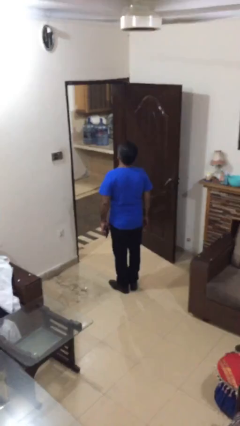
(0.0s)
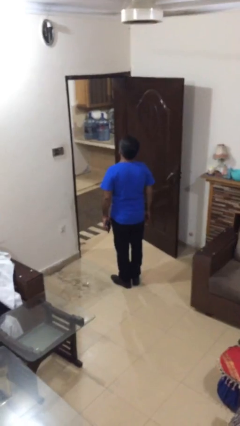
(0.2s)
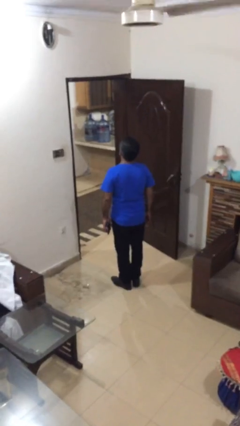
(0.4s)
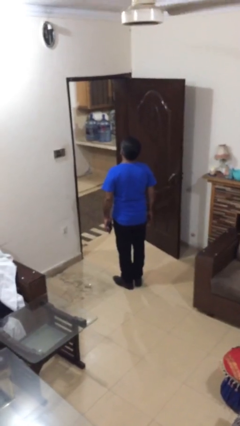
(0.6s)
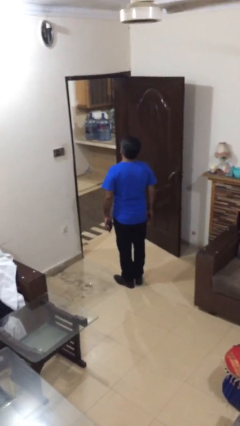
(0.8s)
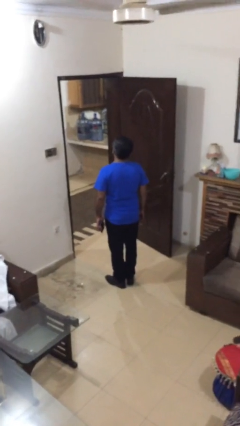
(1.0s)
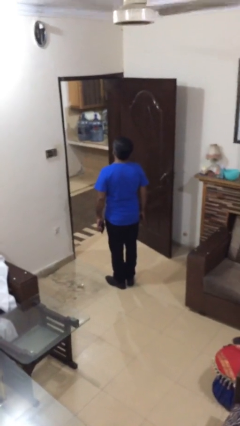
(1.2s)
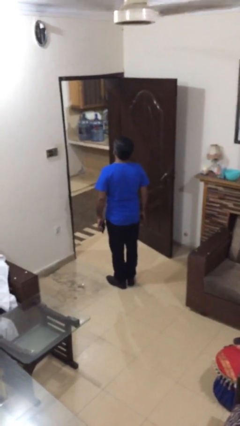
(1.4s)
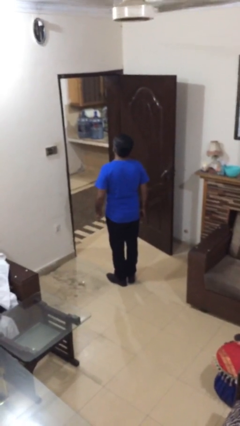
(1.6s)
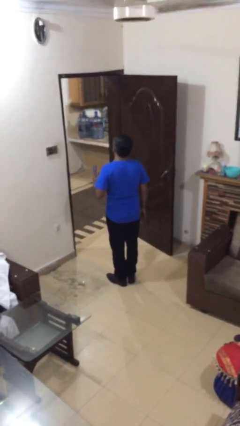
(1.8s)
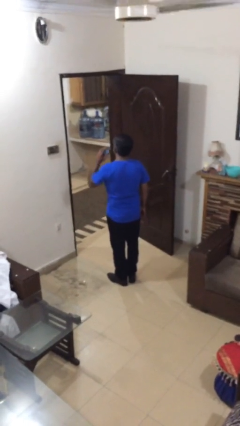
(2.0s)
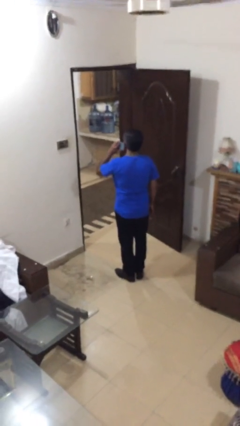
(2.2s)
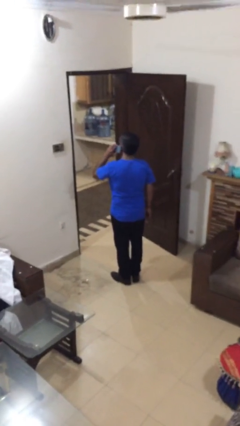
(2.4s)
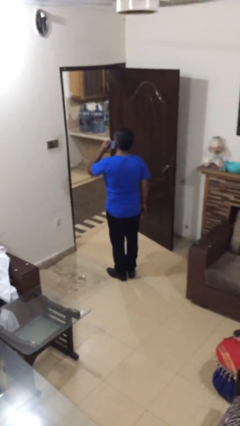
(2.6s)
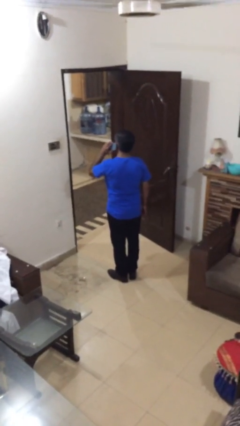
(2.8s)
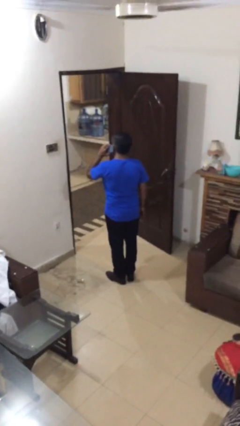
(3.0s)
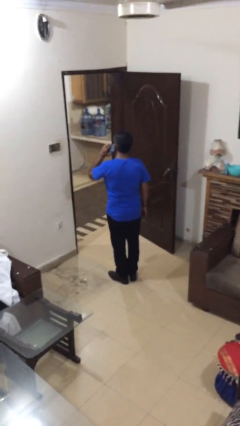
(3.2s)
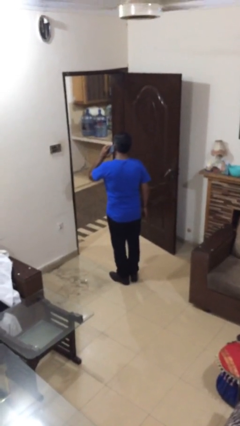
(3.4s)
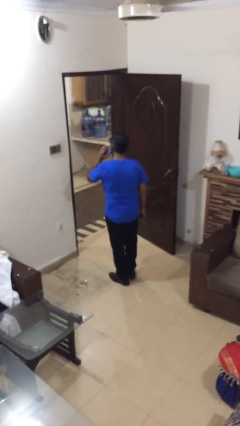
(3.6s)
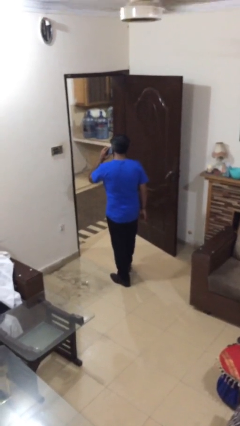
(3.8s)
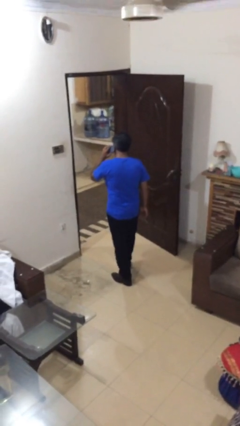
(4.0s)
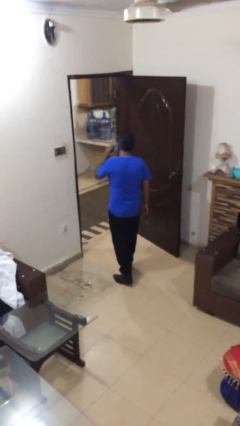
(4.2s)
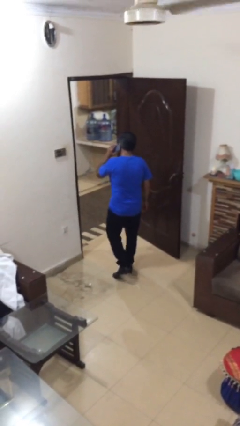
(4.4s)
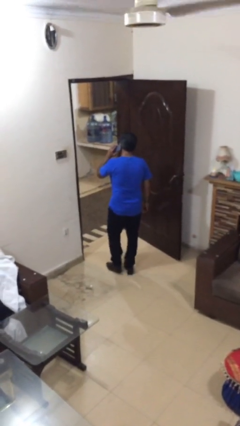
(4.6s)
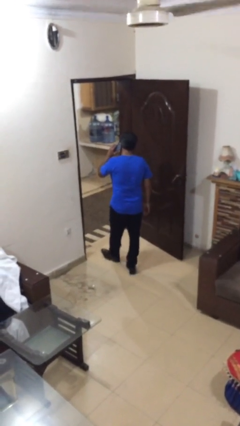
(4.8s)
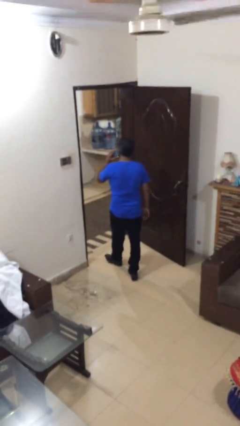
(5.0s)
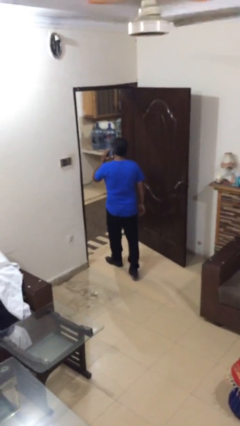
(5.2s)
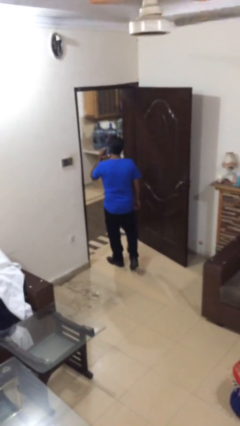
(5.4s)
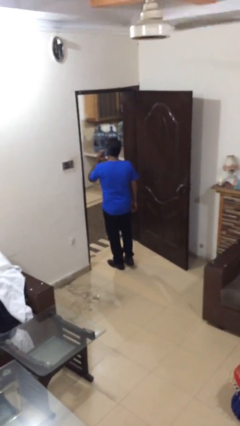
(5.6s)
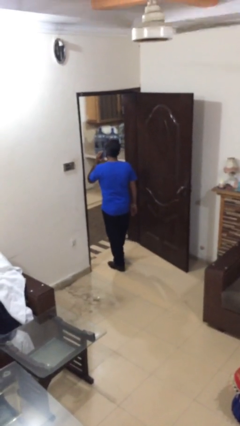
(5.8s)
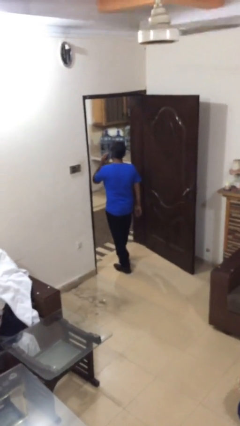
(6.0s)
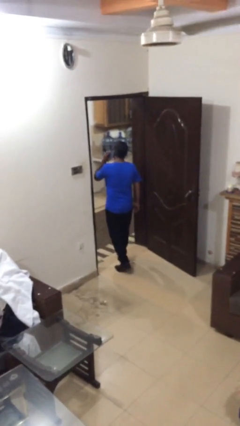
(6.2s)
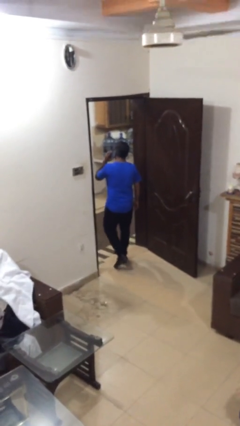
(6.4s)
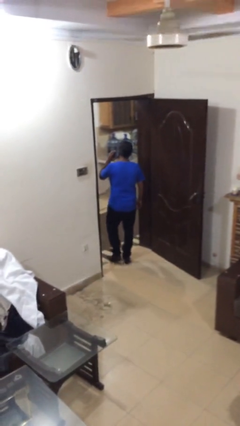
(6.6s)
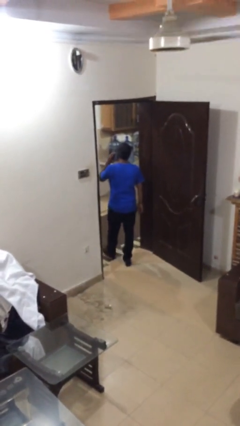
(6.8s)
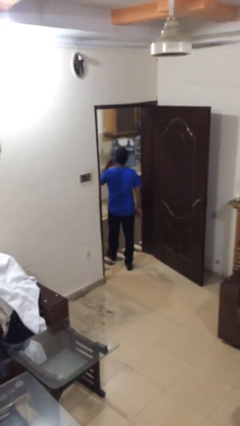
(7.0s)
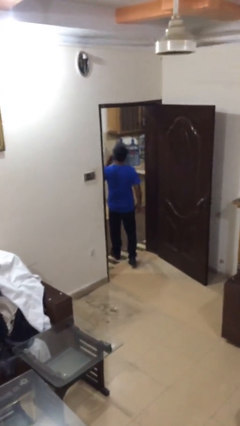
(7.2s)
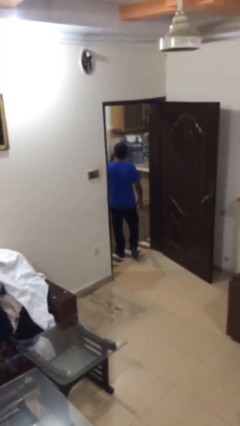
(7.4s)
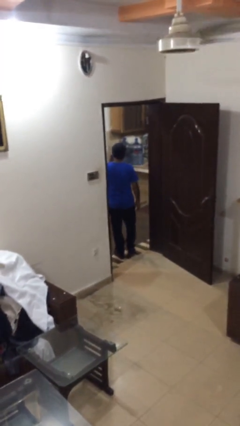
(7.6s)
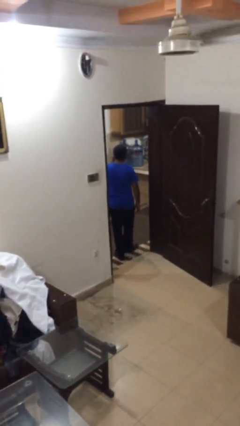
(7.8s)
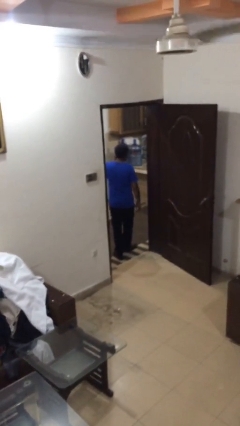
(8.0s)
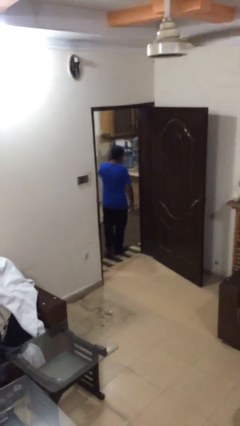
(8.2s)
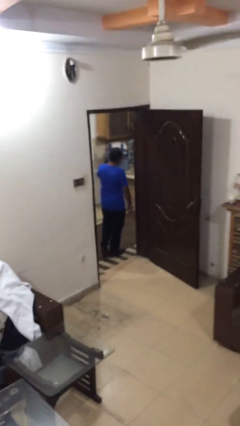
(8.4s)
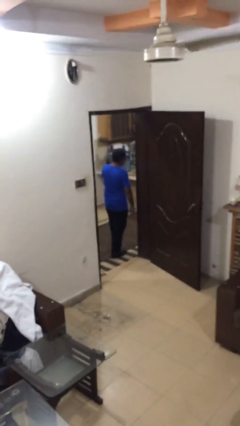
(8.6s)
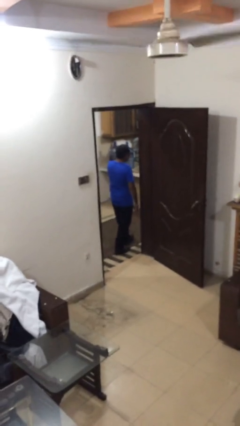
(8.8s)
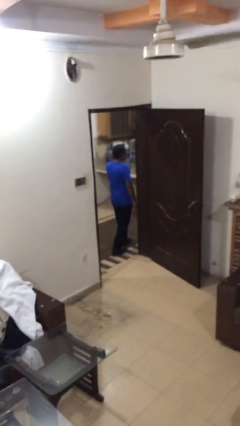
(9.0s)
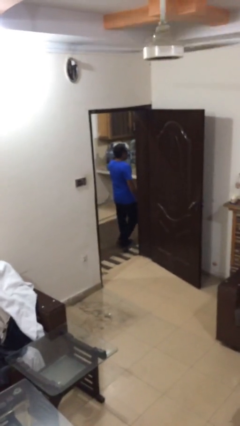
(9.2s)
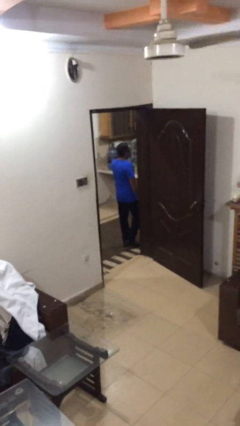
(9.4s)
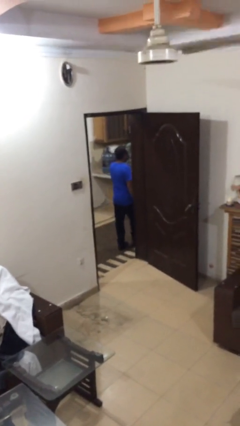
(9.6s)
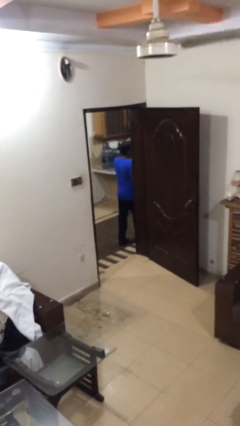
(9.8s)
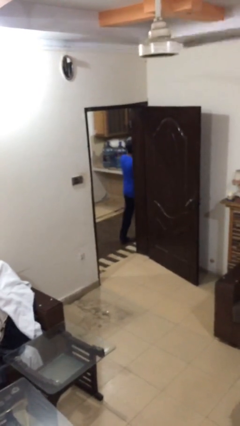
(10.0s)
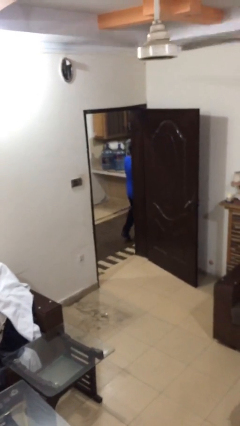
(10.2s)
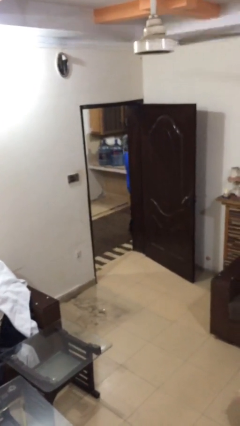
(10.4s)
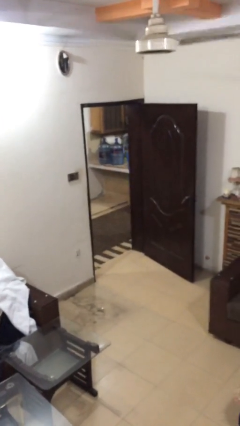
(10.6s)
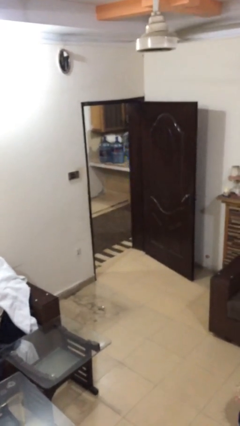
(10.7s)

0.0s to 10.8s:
person exits scene through structure

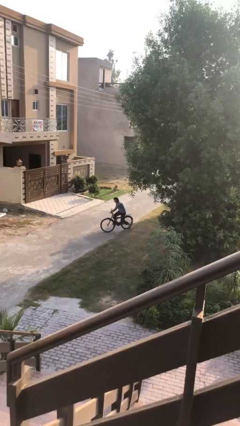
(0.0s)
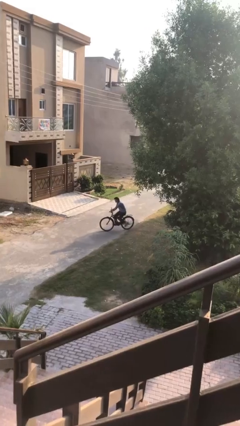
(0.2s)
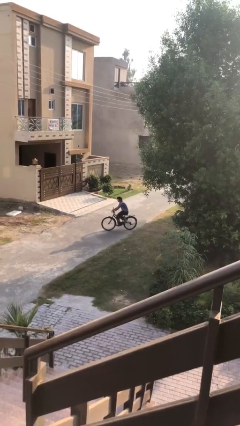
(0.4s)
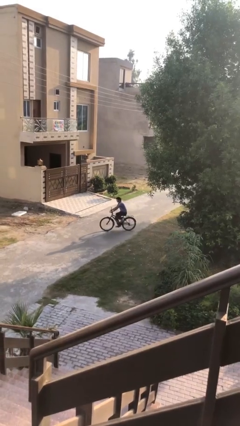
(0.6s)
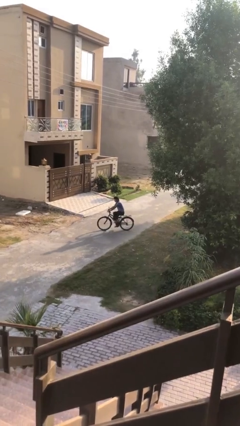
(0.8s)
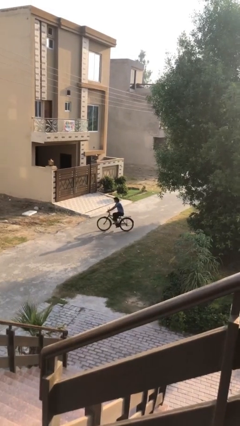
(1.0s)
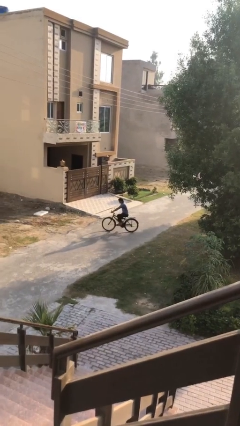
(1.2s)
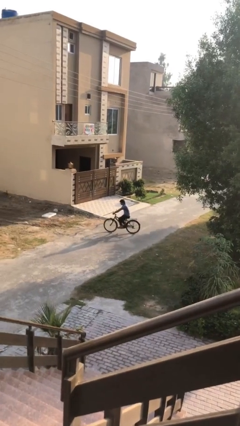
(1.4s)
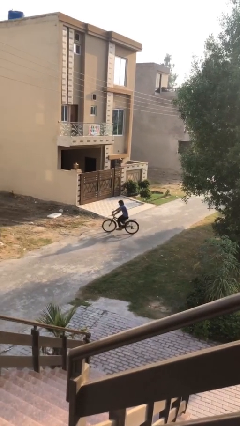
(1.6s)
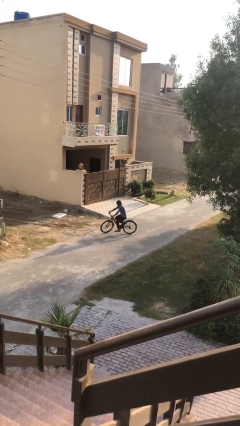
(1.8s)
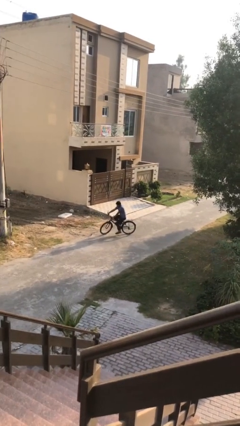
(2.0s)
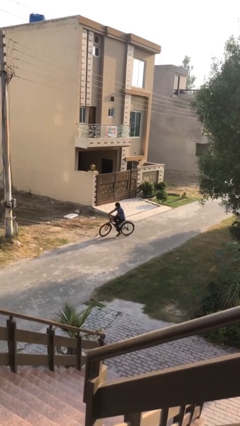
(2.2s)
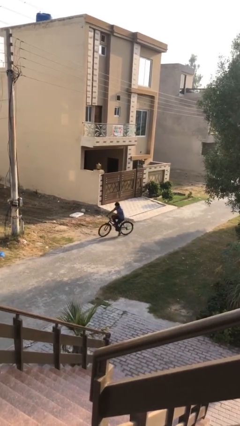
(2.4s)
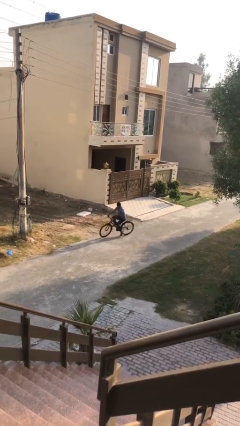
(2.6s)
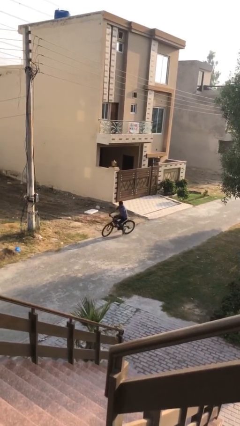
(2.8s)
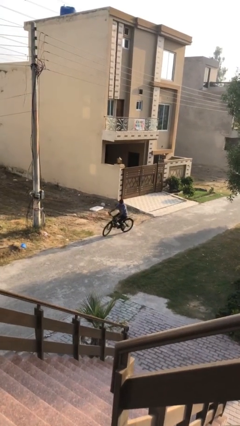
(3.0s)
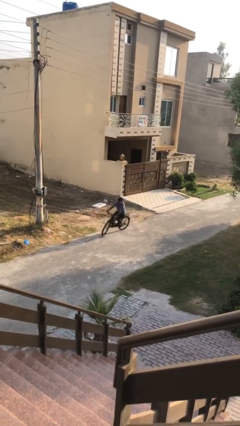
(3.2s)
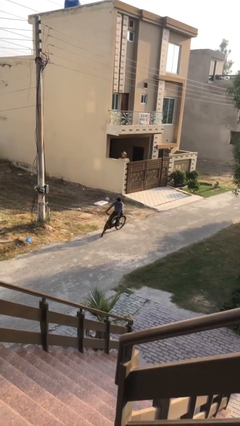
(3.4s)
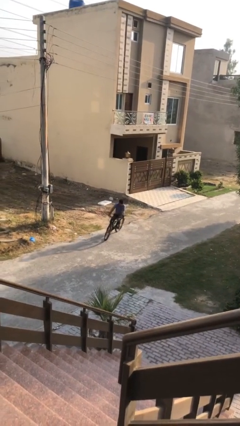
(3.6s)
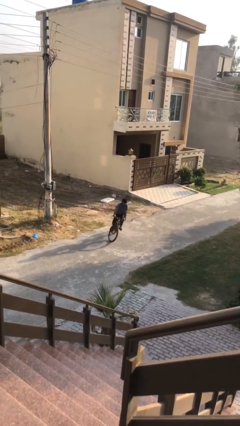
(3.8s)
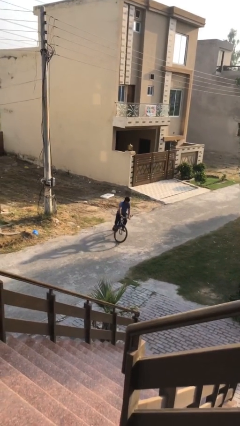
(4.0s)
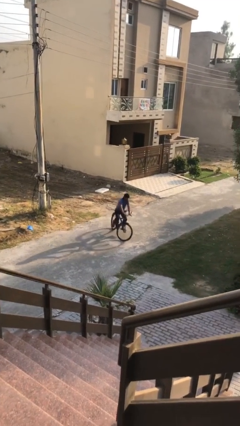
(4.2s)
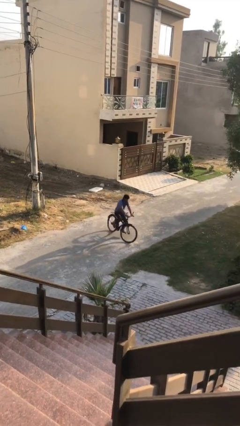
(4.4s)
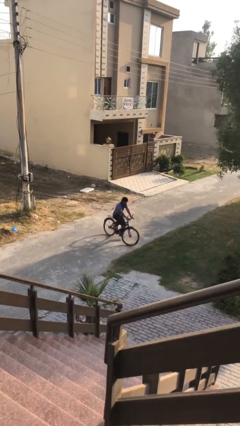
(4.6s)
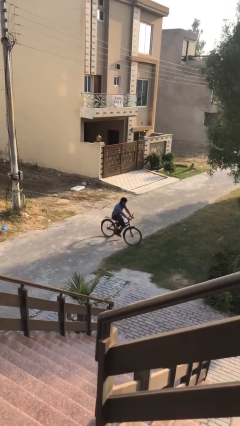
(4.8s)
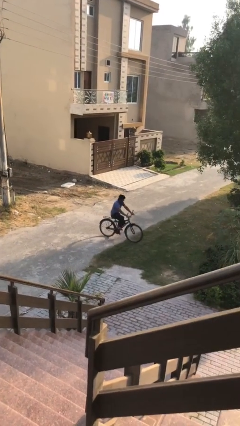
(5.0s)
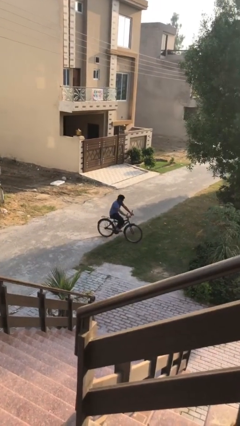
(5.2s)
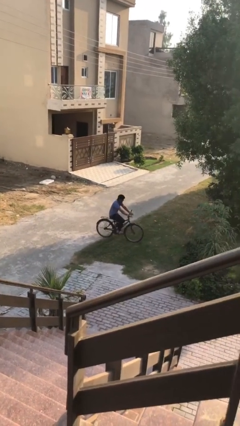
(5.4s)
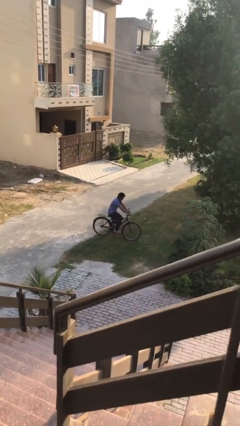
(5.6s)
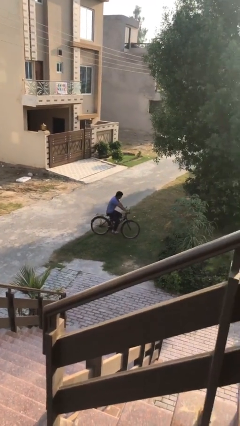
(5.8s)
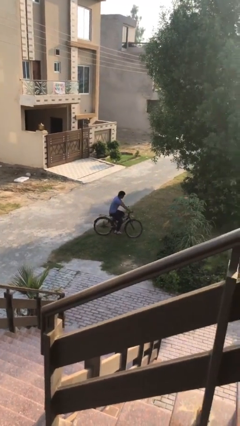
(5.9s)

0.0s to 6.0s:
person rides bicycle

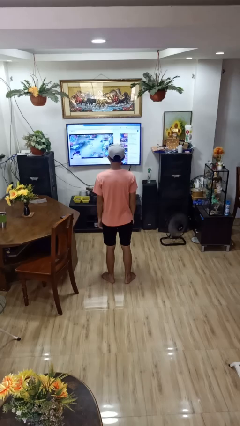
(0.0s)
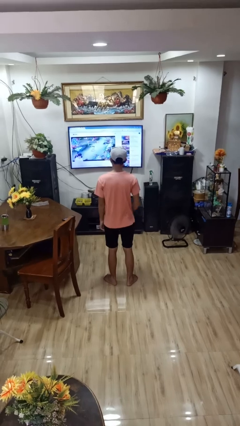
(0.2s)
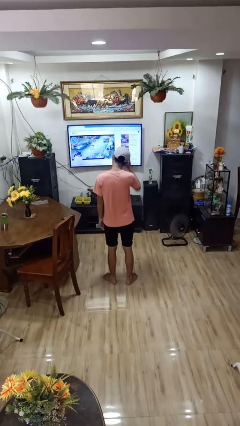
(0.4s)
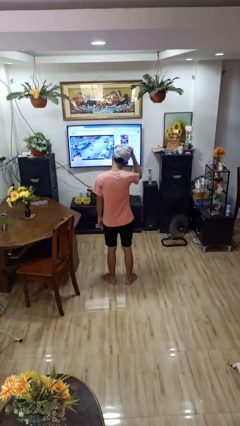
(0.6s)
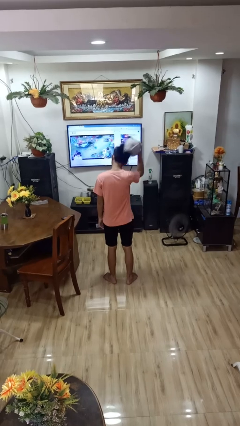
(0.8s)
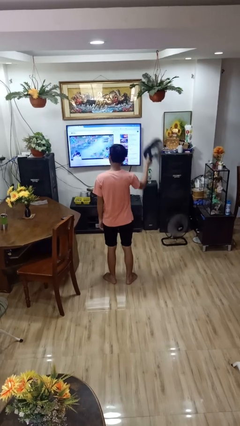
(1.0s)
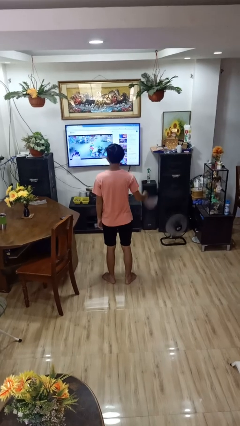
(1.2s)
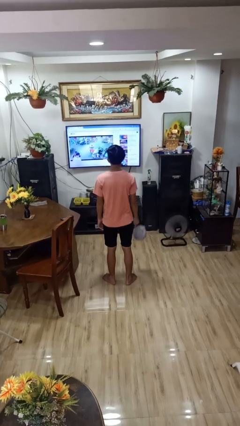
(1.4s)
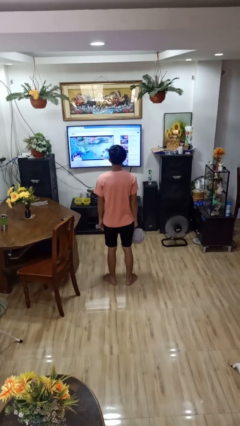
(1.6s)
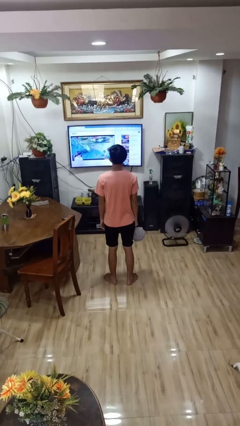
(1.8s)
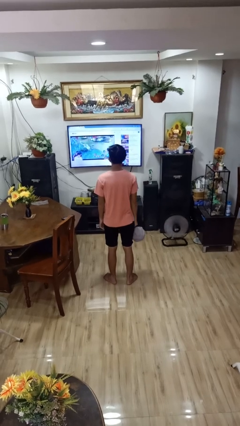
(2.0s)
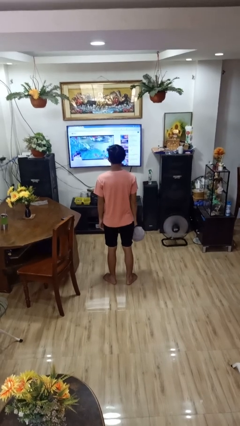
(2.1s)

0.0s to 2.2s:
person takes off hat
